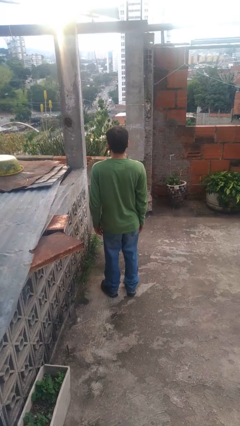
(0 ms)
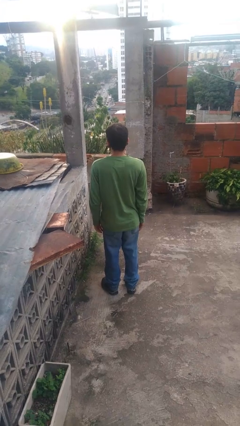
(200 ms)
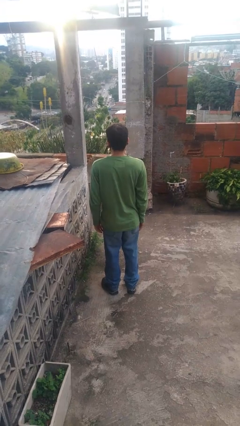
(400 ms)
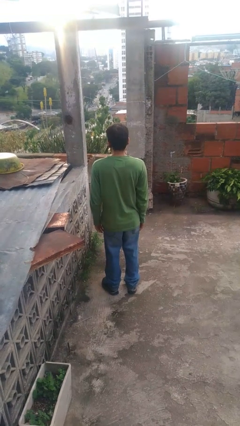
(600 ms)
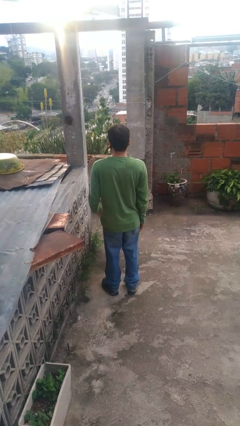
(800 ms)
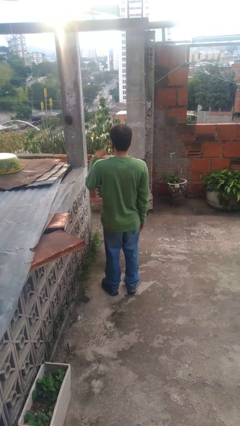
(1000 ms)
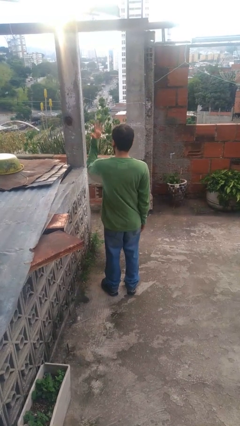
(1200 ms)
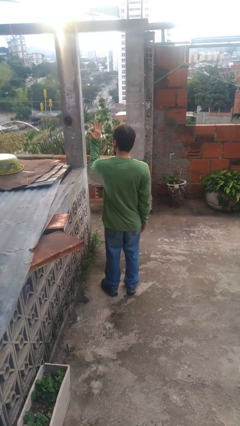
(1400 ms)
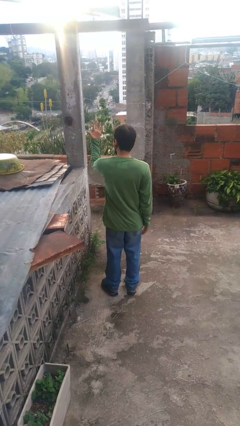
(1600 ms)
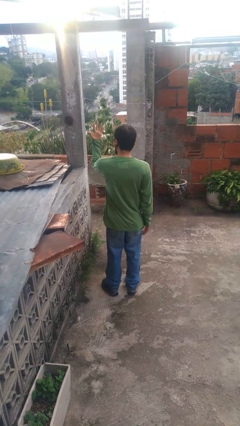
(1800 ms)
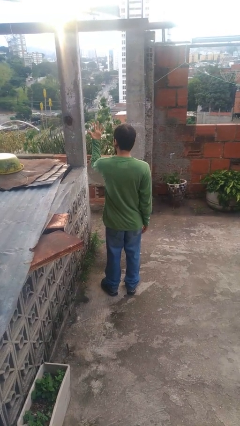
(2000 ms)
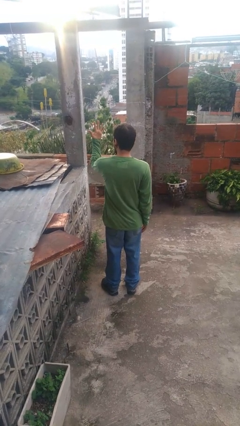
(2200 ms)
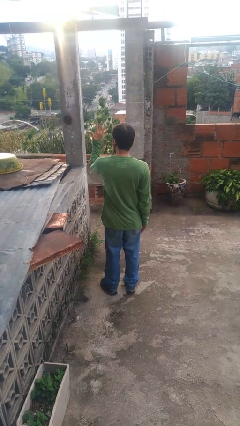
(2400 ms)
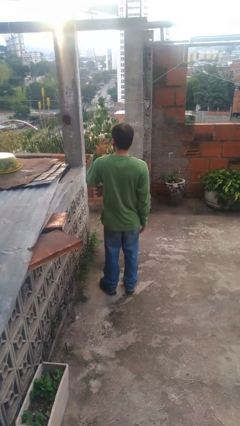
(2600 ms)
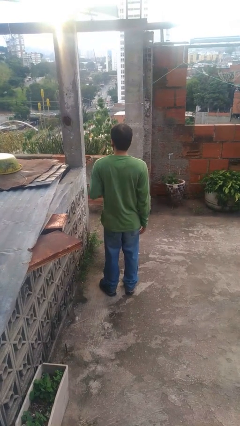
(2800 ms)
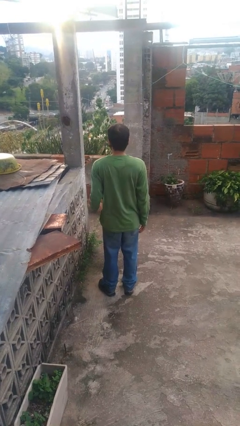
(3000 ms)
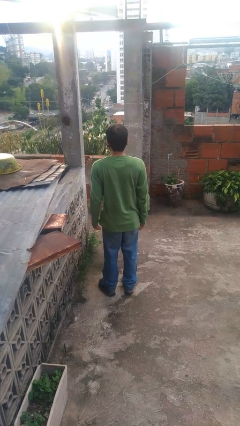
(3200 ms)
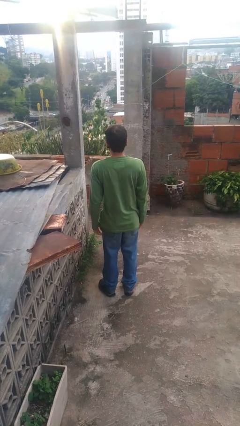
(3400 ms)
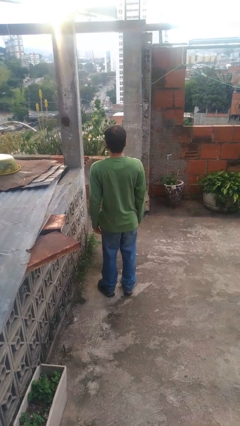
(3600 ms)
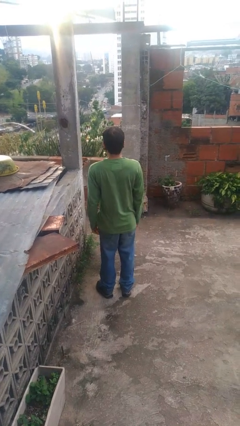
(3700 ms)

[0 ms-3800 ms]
person gestures number five

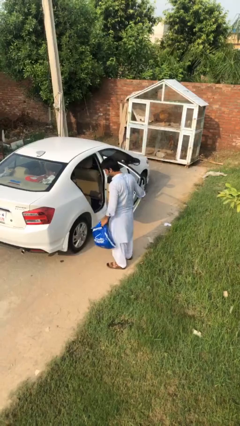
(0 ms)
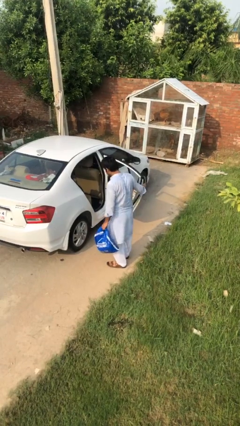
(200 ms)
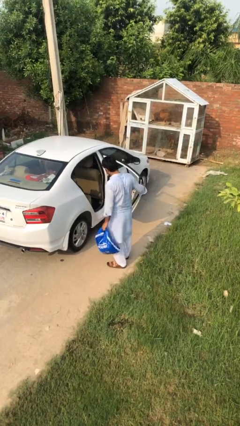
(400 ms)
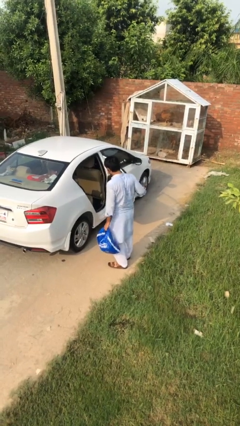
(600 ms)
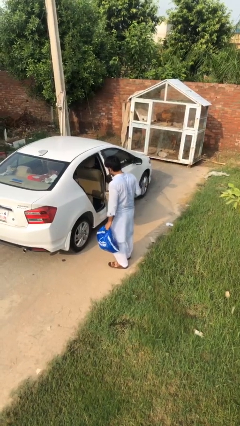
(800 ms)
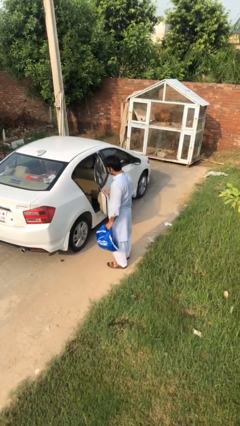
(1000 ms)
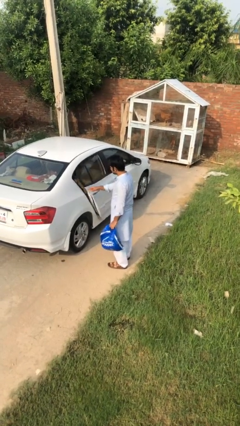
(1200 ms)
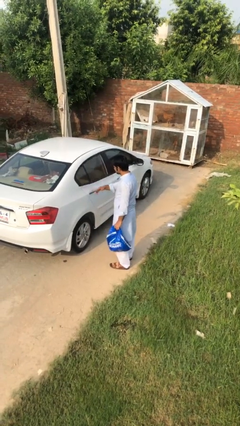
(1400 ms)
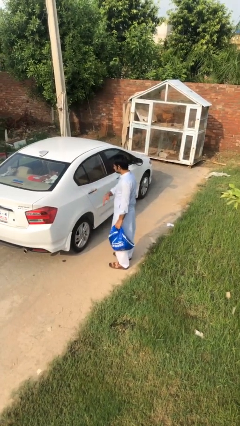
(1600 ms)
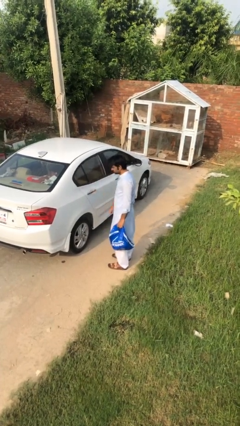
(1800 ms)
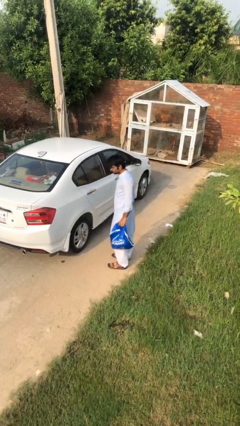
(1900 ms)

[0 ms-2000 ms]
person closes car door

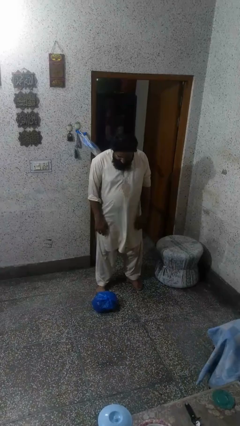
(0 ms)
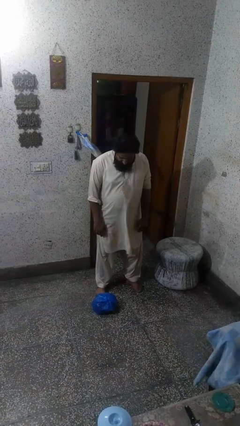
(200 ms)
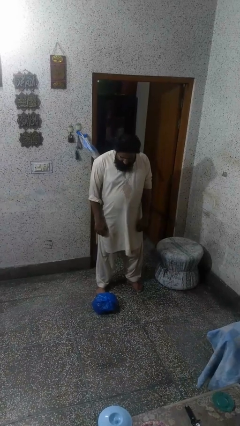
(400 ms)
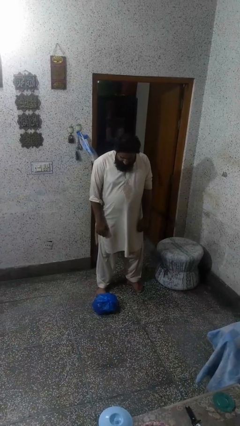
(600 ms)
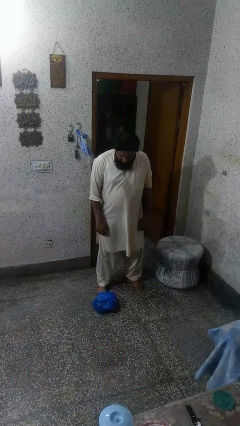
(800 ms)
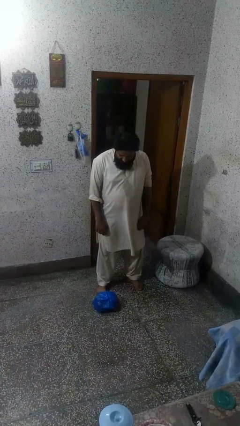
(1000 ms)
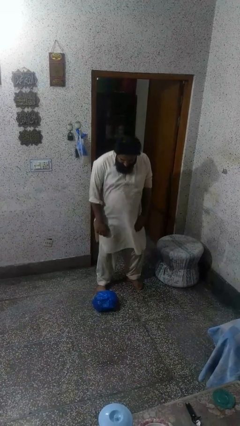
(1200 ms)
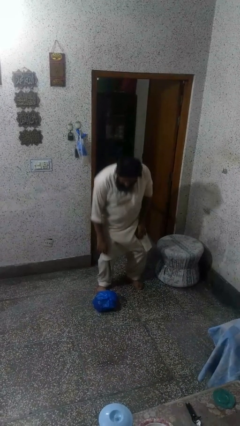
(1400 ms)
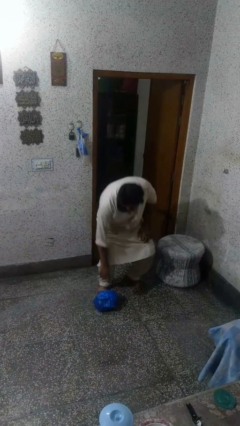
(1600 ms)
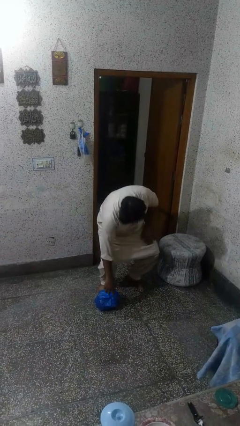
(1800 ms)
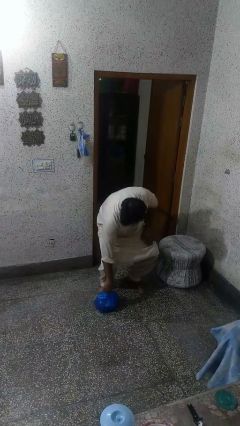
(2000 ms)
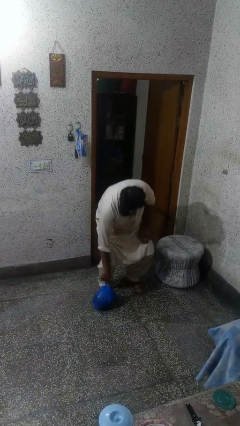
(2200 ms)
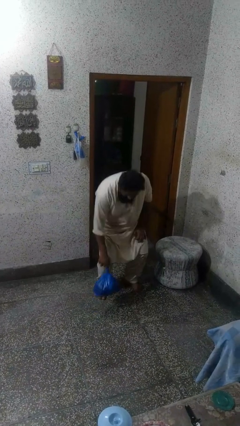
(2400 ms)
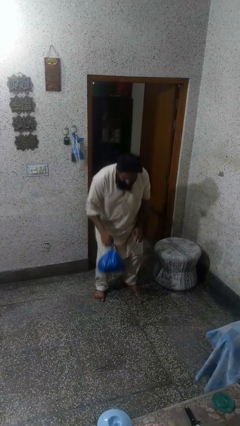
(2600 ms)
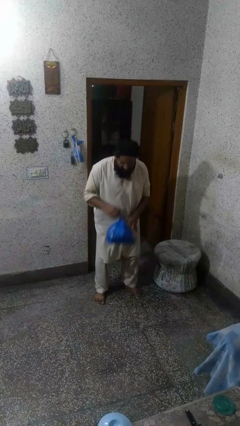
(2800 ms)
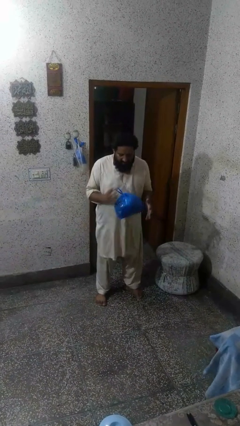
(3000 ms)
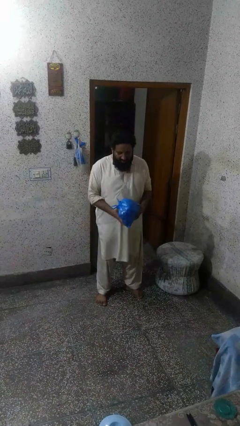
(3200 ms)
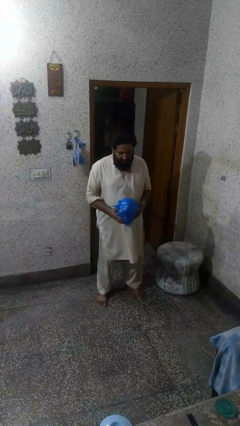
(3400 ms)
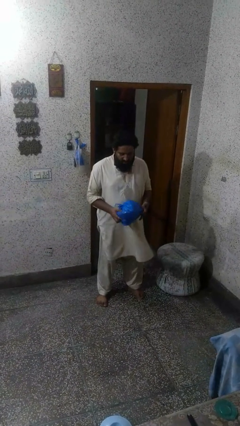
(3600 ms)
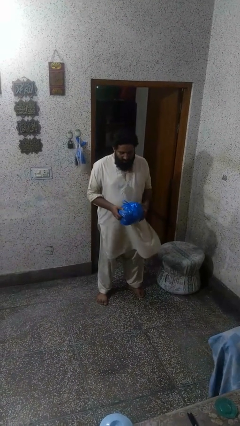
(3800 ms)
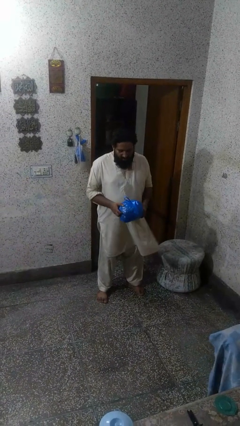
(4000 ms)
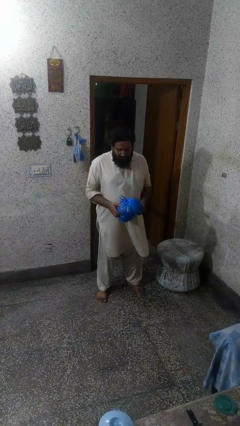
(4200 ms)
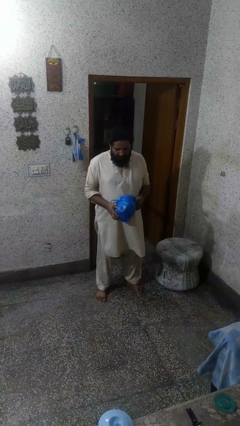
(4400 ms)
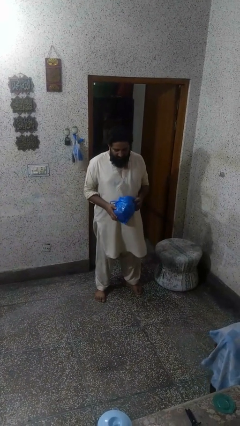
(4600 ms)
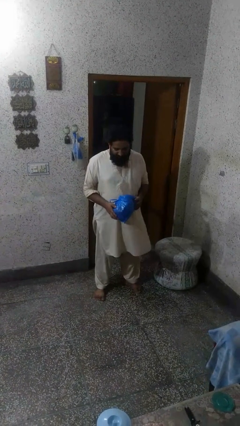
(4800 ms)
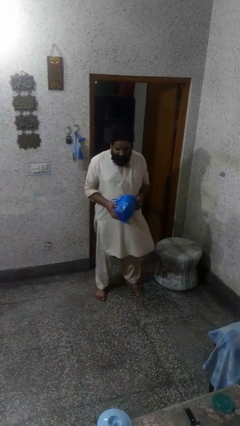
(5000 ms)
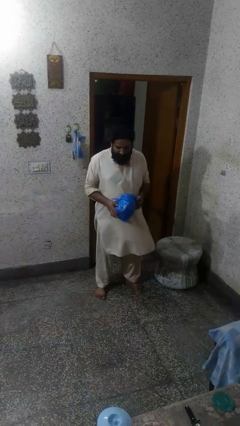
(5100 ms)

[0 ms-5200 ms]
person picks up object from floor

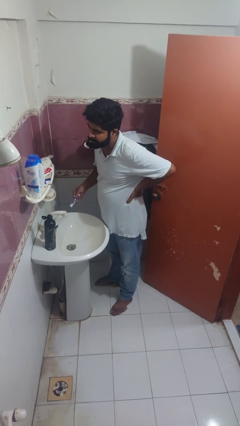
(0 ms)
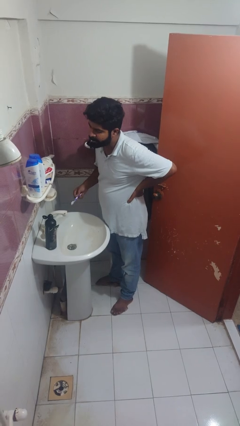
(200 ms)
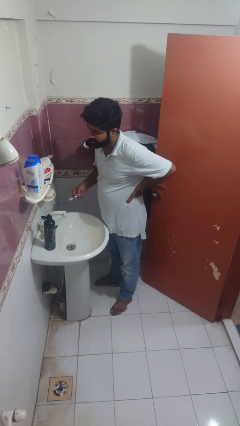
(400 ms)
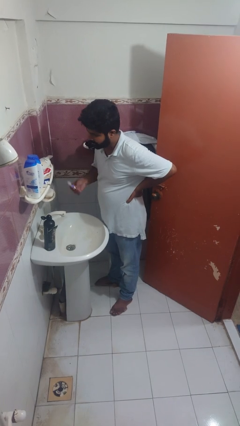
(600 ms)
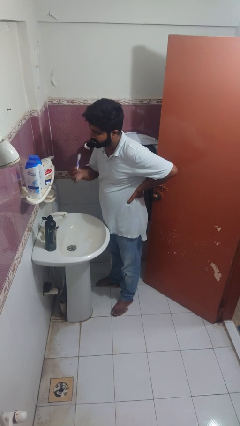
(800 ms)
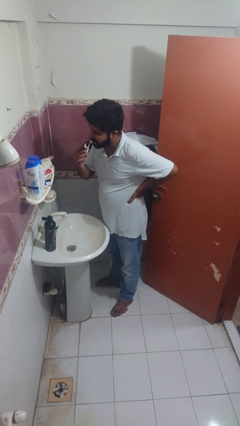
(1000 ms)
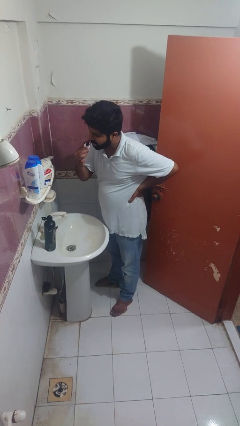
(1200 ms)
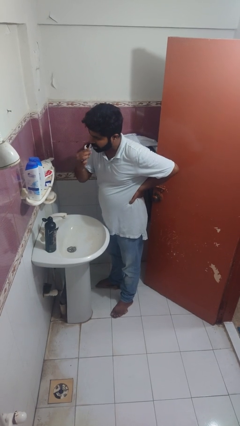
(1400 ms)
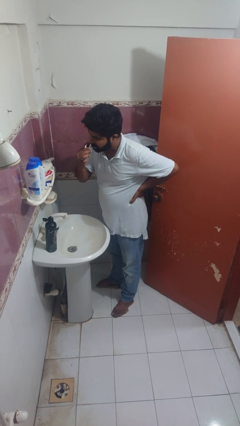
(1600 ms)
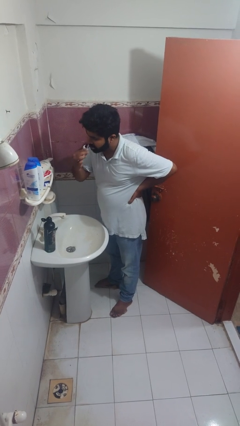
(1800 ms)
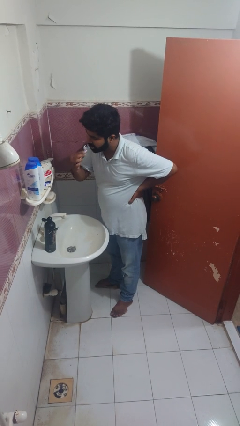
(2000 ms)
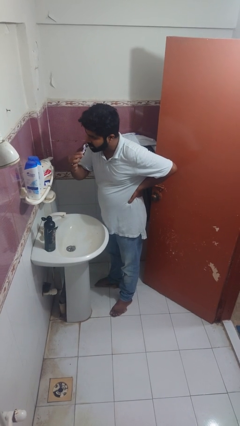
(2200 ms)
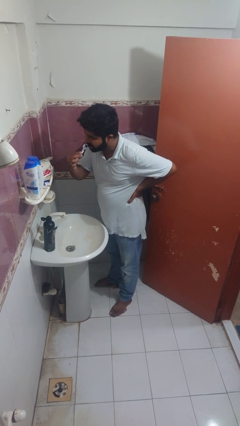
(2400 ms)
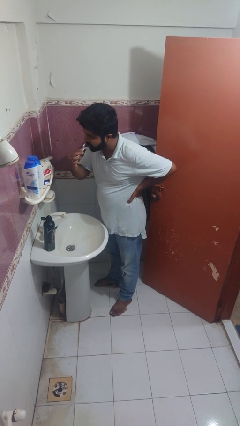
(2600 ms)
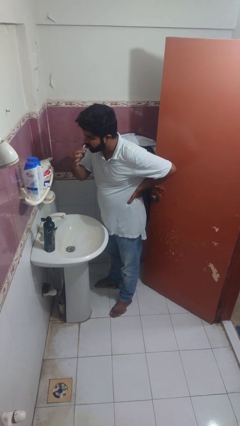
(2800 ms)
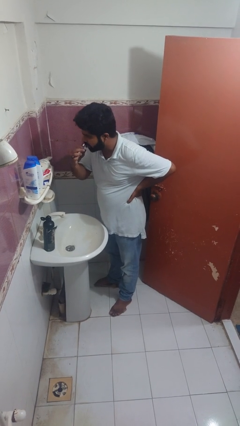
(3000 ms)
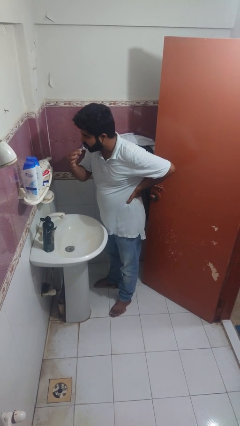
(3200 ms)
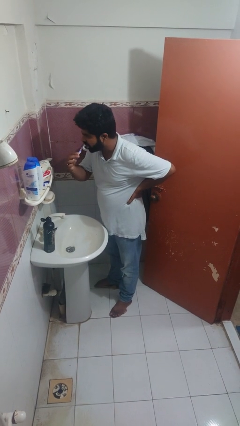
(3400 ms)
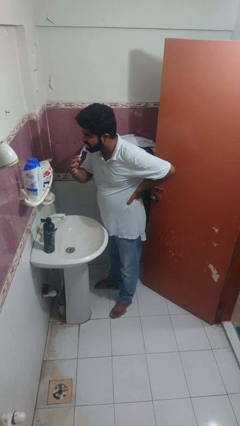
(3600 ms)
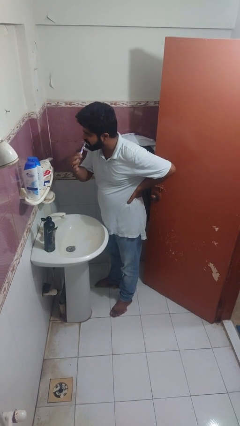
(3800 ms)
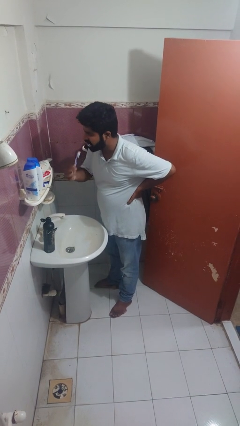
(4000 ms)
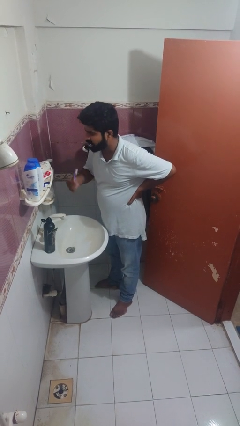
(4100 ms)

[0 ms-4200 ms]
person brushes teeth

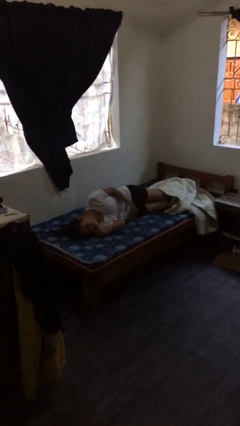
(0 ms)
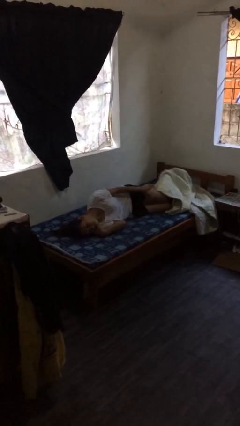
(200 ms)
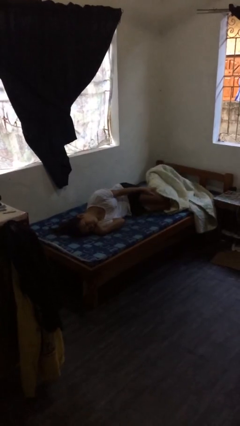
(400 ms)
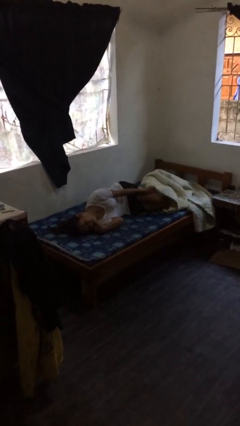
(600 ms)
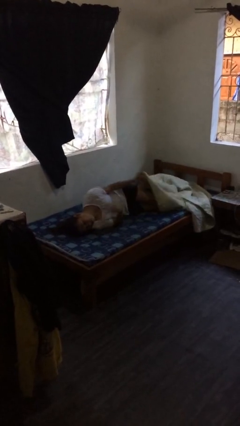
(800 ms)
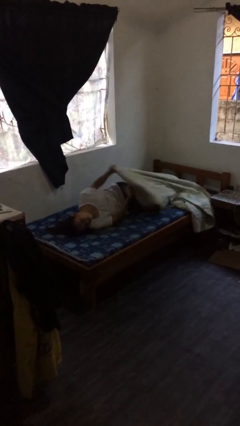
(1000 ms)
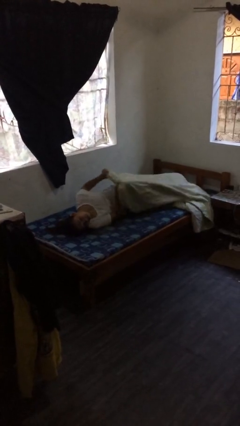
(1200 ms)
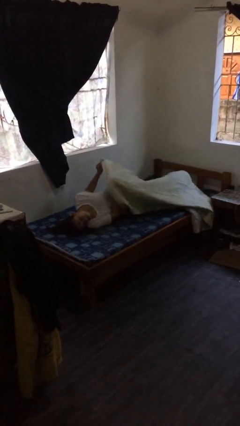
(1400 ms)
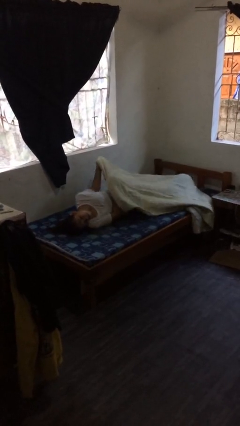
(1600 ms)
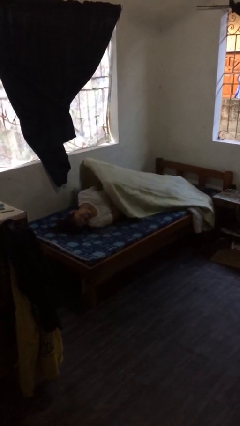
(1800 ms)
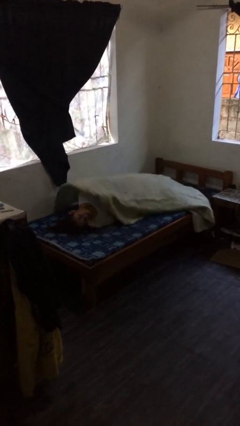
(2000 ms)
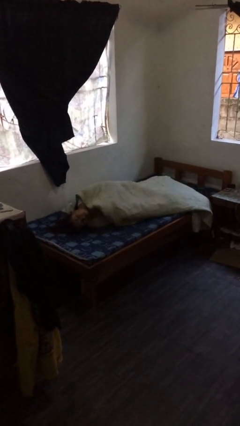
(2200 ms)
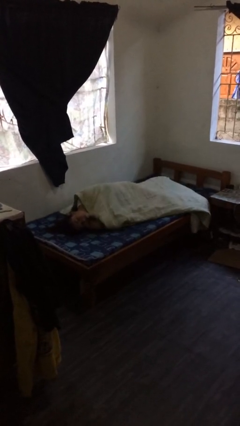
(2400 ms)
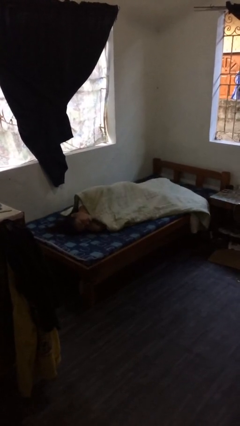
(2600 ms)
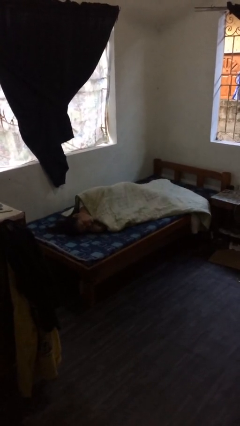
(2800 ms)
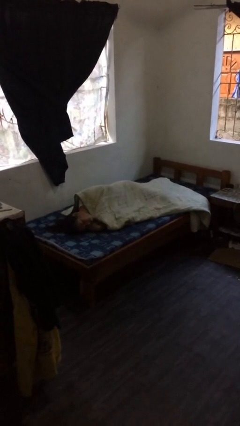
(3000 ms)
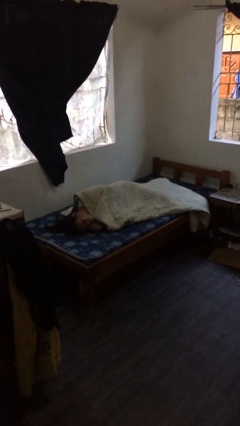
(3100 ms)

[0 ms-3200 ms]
person covers with bedsheets
